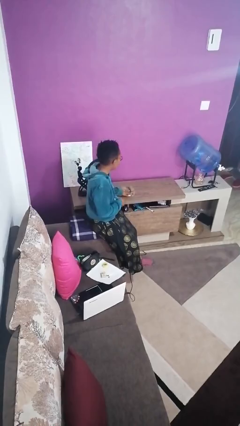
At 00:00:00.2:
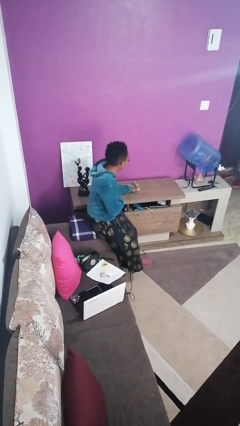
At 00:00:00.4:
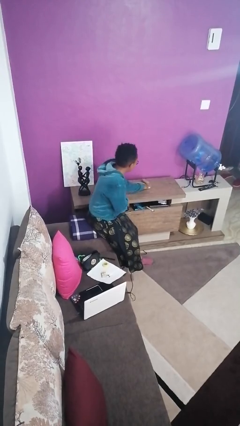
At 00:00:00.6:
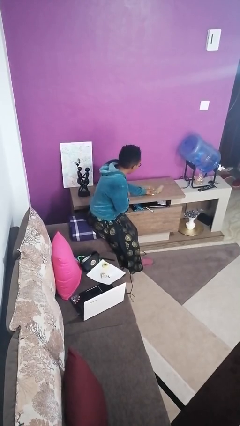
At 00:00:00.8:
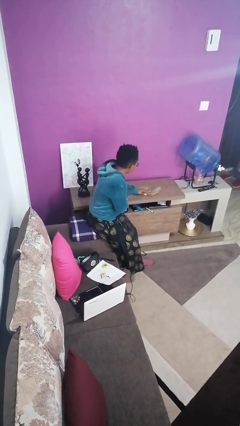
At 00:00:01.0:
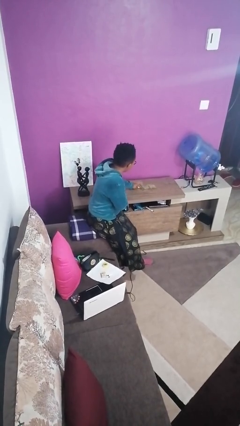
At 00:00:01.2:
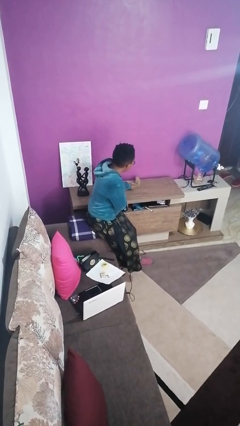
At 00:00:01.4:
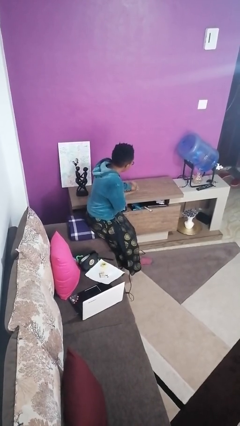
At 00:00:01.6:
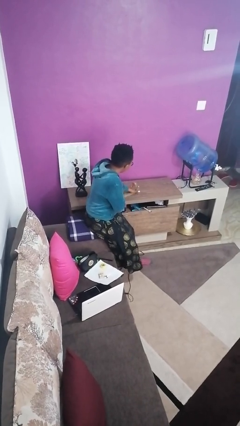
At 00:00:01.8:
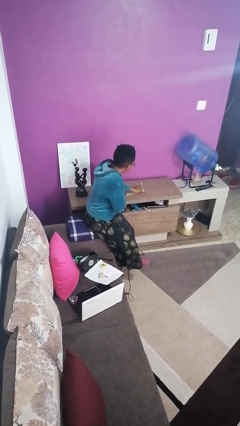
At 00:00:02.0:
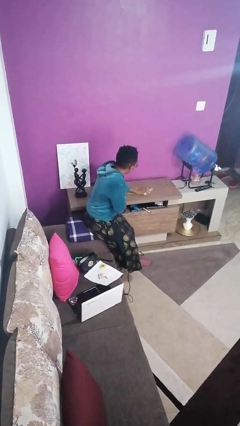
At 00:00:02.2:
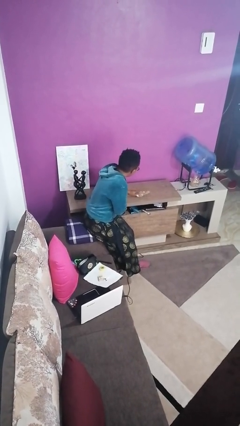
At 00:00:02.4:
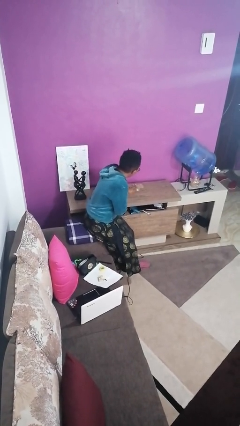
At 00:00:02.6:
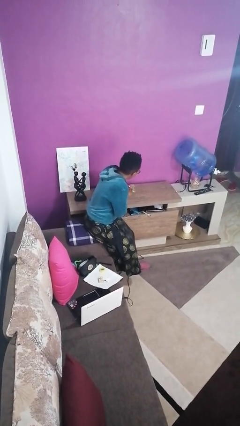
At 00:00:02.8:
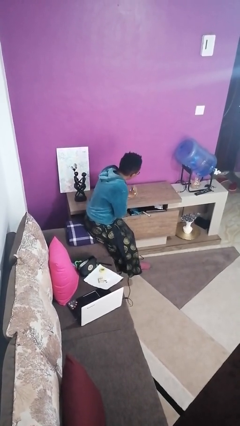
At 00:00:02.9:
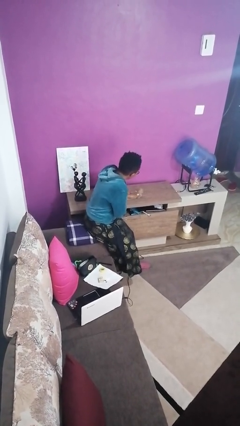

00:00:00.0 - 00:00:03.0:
person cleans table with rag

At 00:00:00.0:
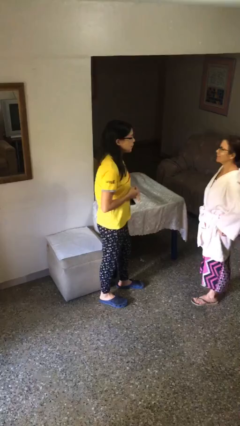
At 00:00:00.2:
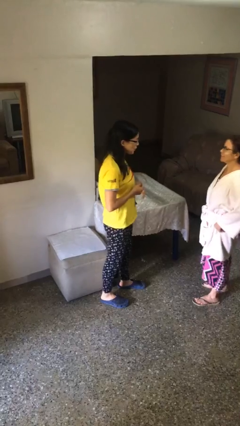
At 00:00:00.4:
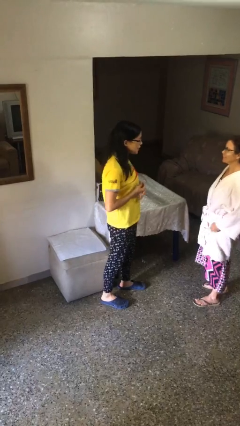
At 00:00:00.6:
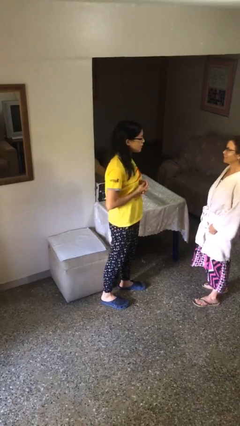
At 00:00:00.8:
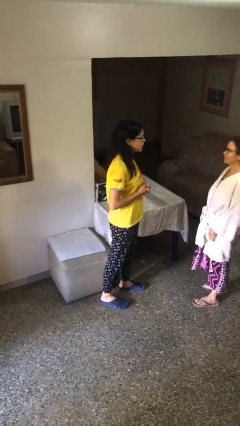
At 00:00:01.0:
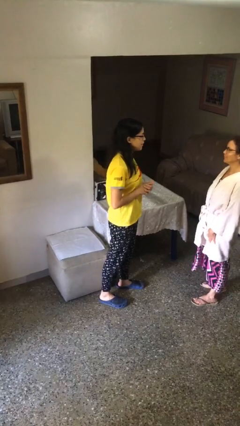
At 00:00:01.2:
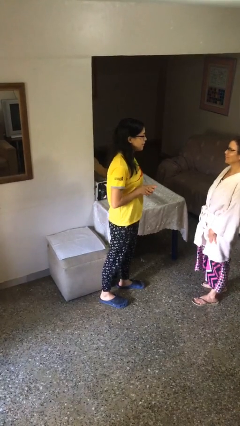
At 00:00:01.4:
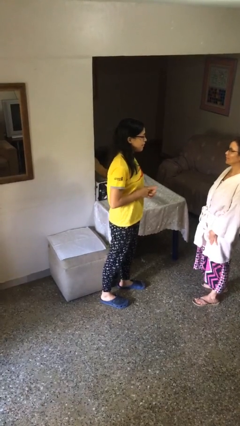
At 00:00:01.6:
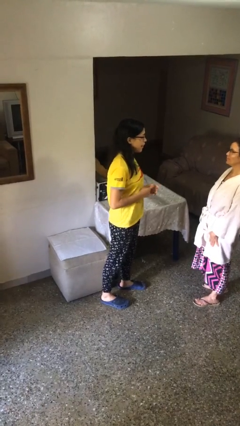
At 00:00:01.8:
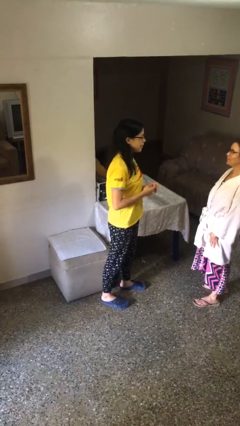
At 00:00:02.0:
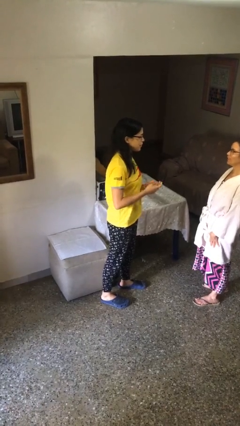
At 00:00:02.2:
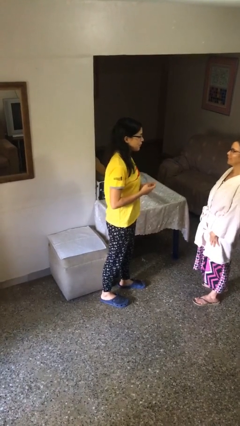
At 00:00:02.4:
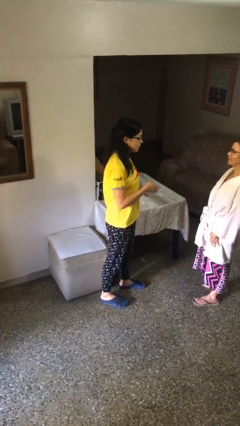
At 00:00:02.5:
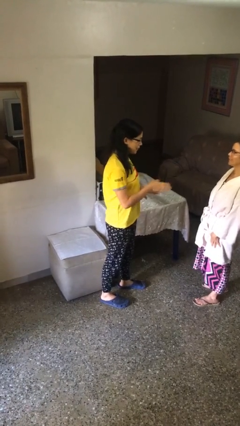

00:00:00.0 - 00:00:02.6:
person talks to person

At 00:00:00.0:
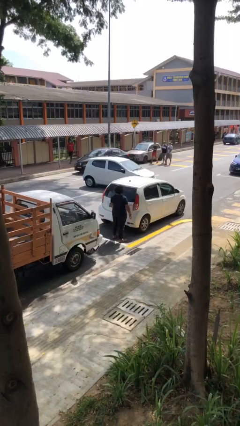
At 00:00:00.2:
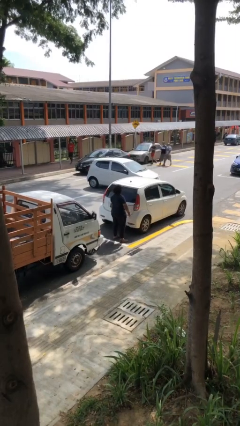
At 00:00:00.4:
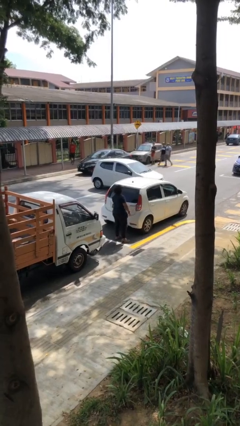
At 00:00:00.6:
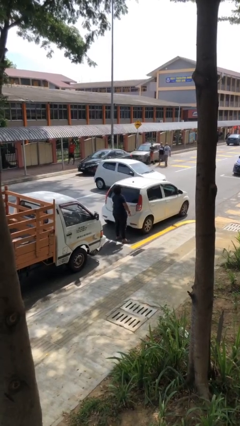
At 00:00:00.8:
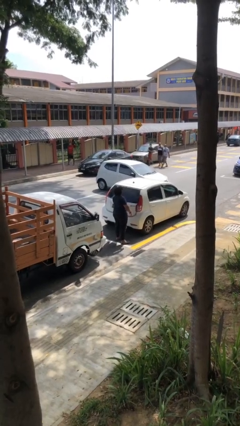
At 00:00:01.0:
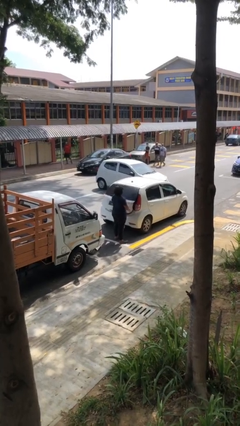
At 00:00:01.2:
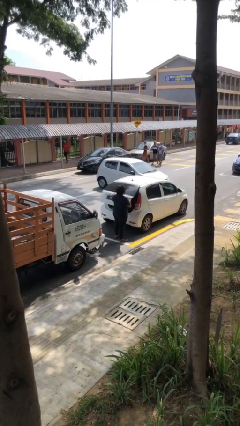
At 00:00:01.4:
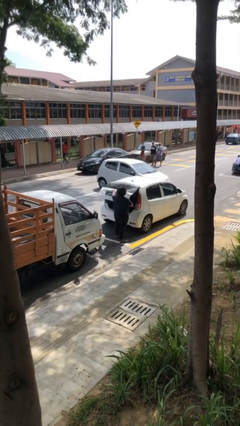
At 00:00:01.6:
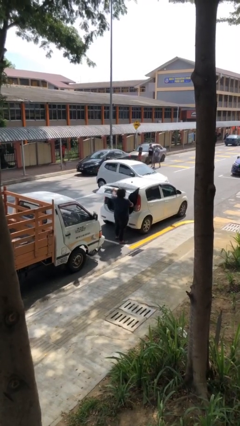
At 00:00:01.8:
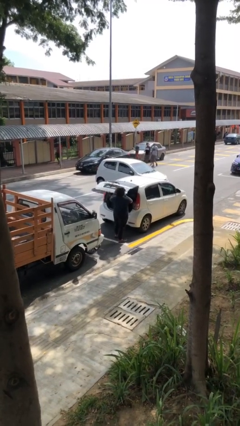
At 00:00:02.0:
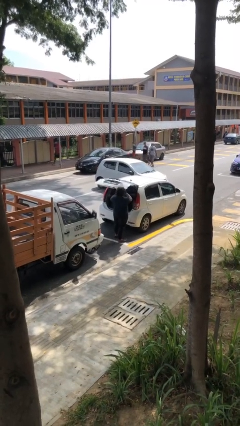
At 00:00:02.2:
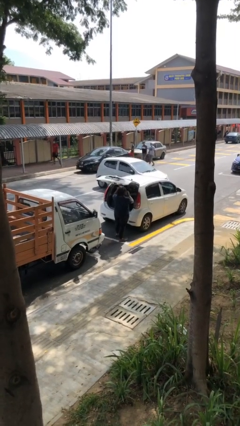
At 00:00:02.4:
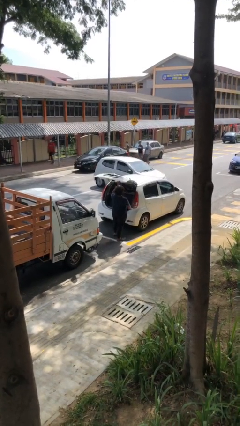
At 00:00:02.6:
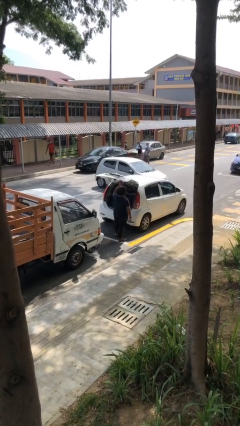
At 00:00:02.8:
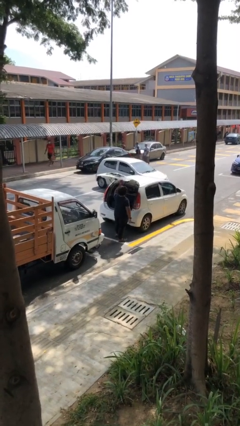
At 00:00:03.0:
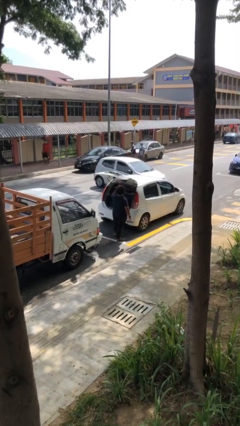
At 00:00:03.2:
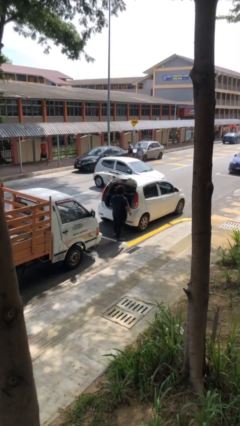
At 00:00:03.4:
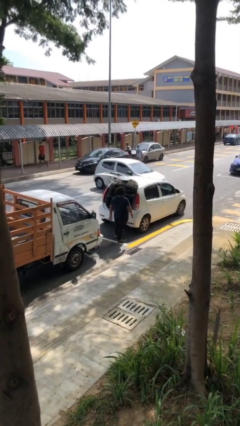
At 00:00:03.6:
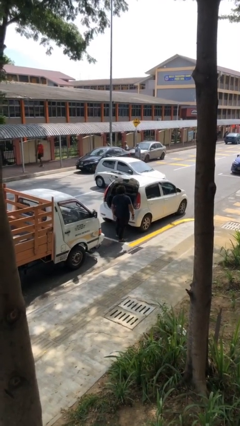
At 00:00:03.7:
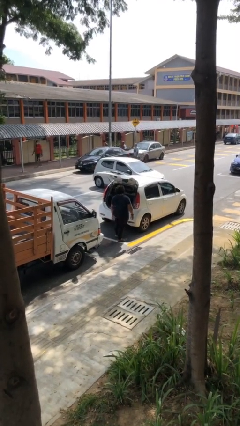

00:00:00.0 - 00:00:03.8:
person opens car trunk

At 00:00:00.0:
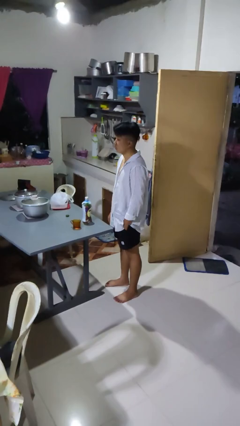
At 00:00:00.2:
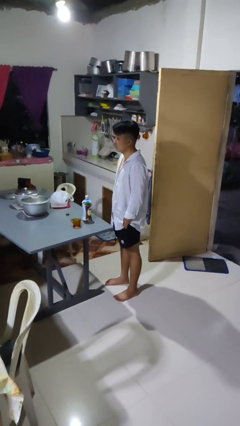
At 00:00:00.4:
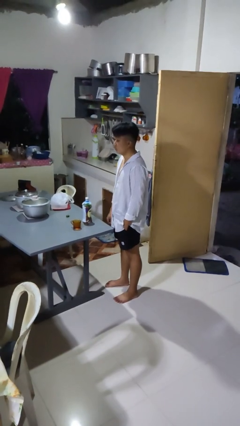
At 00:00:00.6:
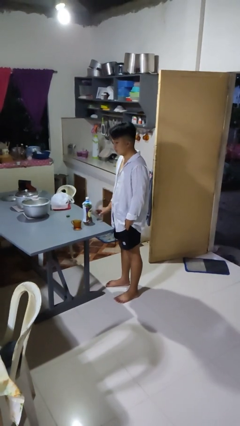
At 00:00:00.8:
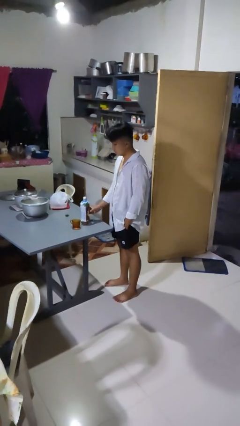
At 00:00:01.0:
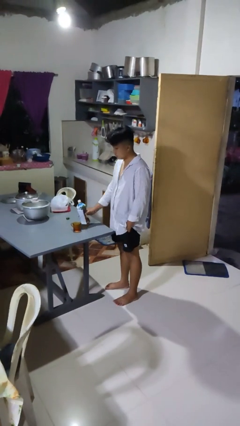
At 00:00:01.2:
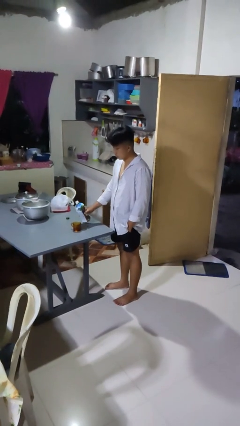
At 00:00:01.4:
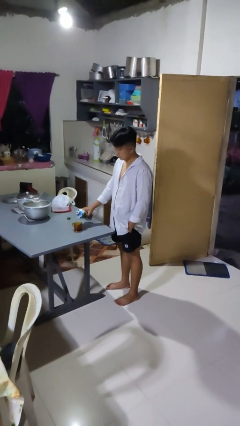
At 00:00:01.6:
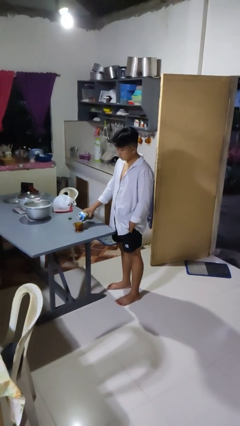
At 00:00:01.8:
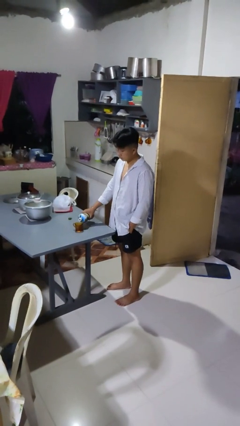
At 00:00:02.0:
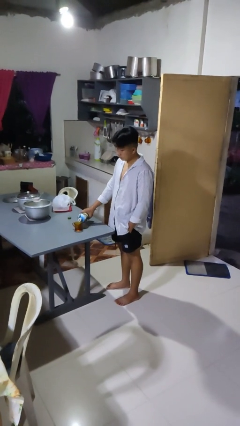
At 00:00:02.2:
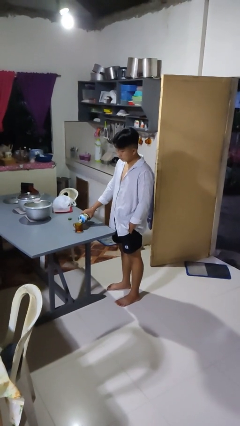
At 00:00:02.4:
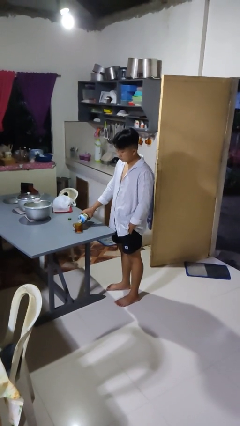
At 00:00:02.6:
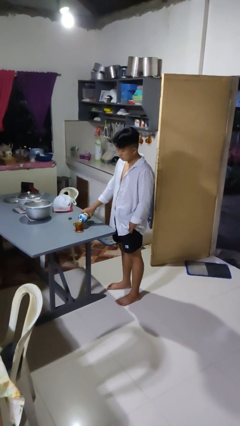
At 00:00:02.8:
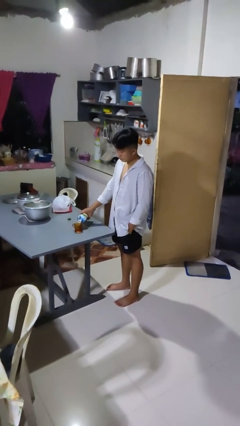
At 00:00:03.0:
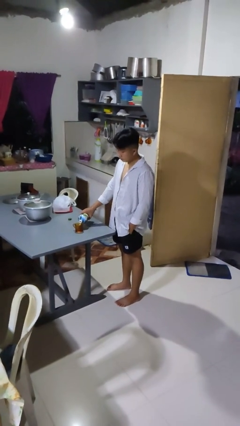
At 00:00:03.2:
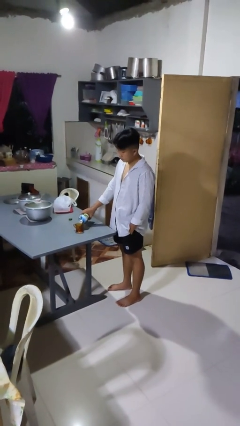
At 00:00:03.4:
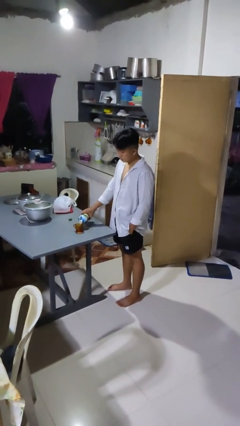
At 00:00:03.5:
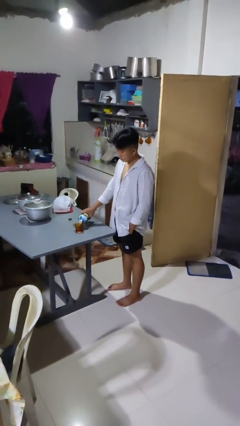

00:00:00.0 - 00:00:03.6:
person pours liquid into cup

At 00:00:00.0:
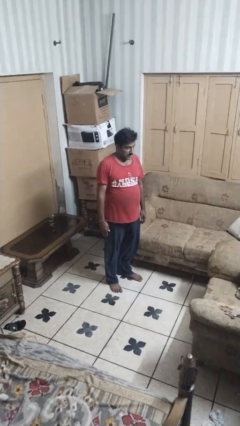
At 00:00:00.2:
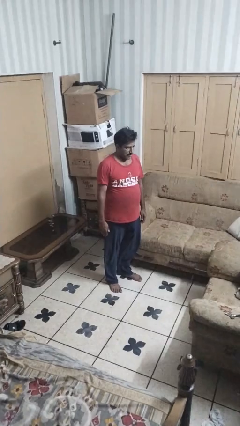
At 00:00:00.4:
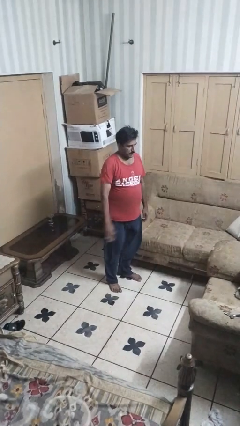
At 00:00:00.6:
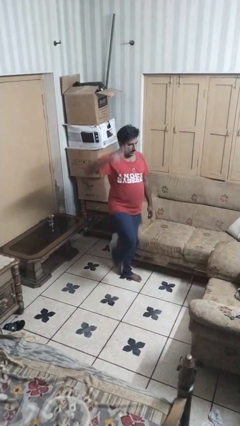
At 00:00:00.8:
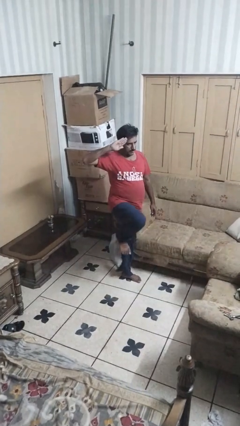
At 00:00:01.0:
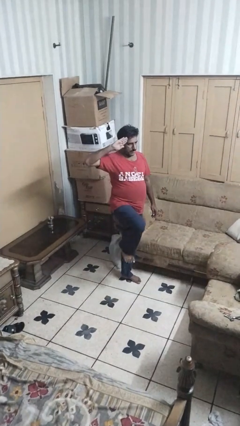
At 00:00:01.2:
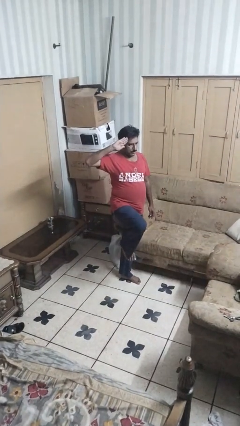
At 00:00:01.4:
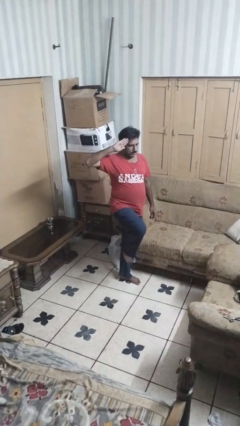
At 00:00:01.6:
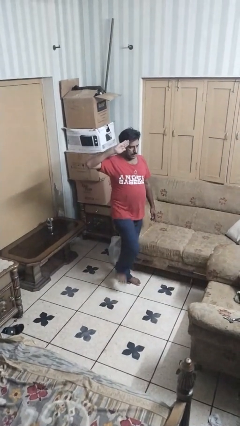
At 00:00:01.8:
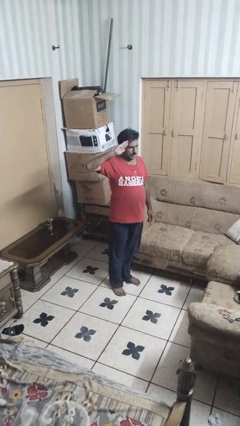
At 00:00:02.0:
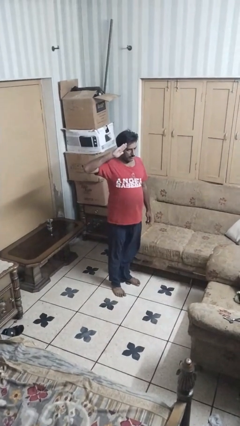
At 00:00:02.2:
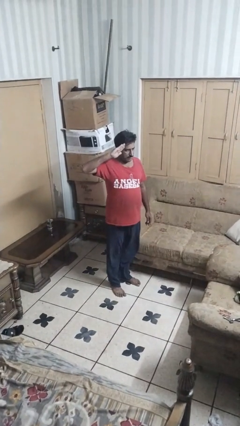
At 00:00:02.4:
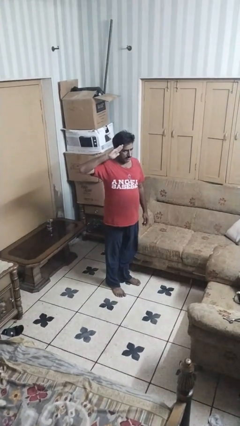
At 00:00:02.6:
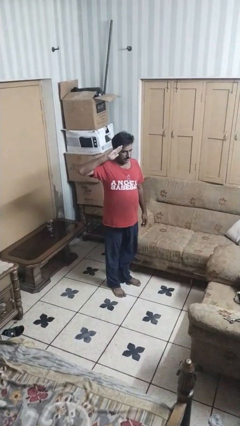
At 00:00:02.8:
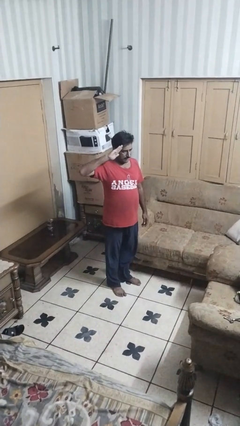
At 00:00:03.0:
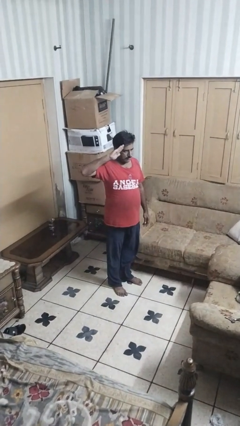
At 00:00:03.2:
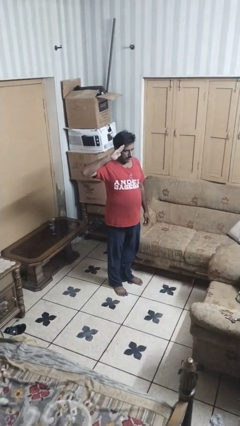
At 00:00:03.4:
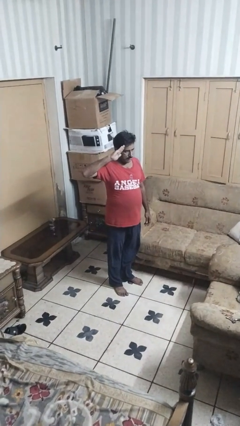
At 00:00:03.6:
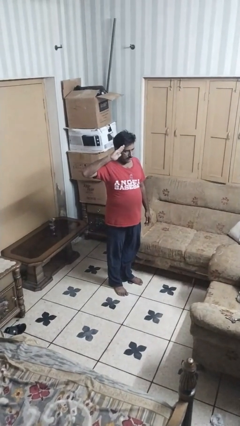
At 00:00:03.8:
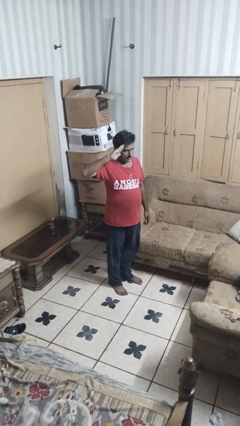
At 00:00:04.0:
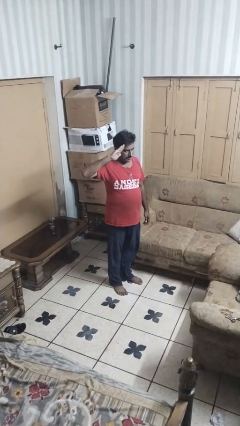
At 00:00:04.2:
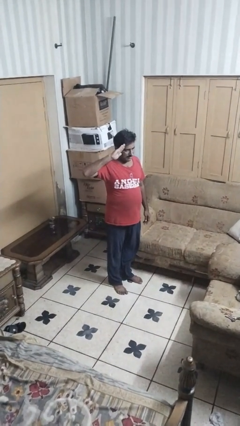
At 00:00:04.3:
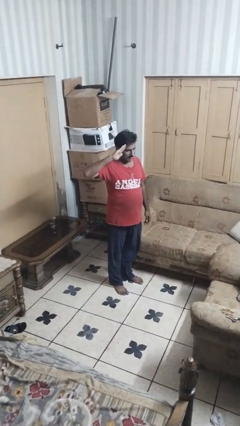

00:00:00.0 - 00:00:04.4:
person salutes
